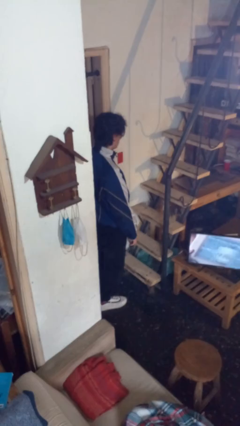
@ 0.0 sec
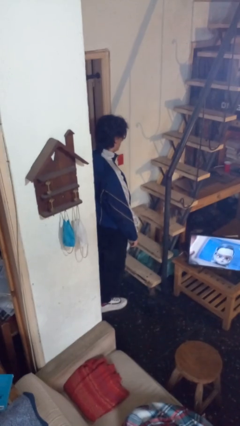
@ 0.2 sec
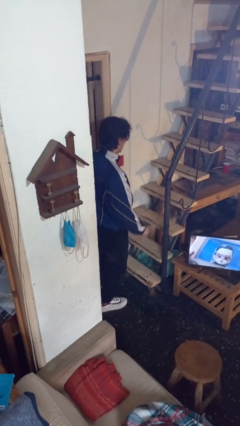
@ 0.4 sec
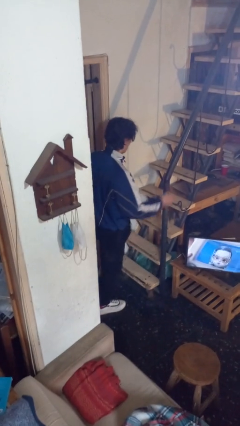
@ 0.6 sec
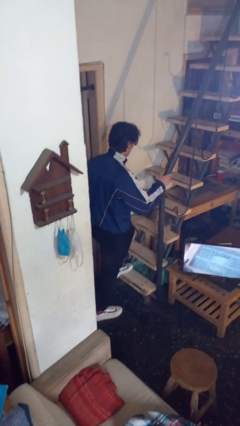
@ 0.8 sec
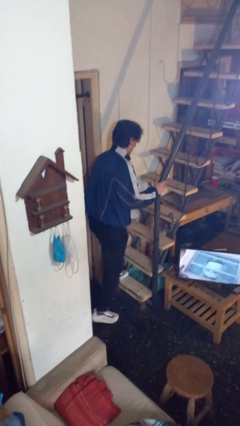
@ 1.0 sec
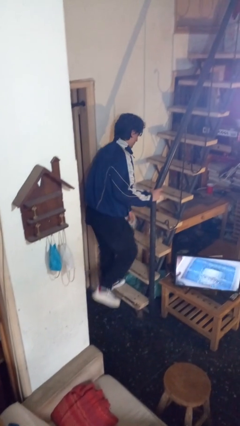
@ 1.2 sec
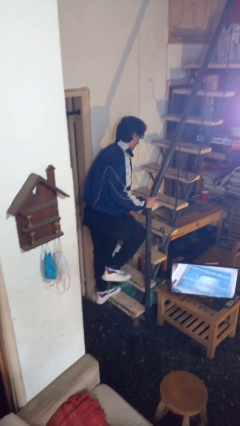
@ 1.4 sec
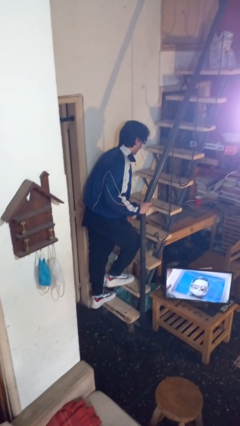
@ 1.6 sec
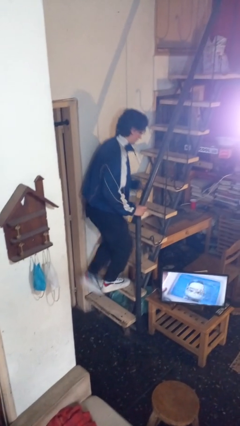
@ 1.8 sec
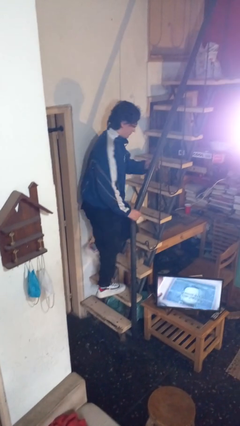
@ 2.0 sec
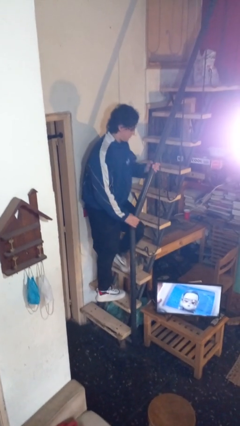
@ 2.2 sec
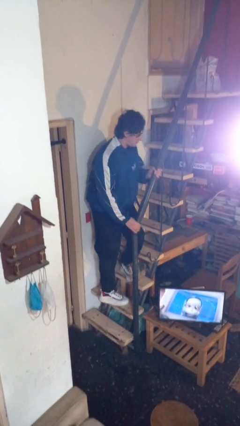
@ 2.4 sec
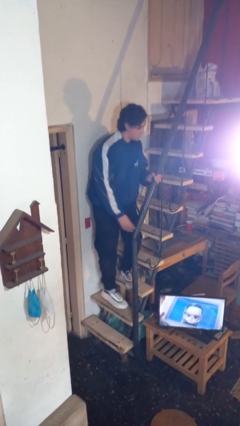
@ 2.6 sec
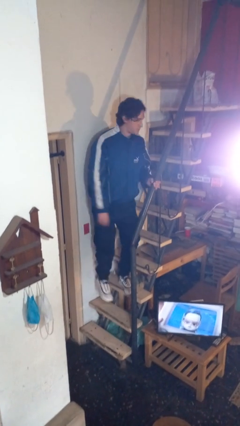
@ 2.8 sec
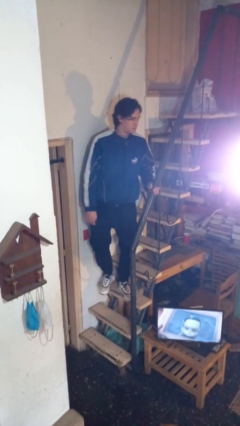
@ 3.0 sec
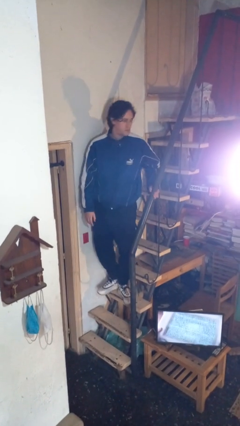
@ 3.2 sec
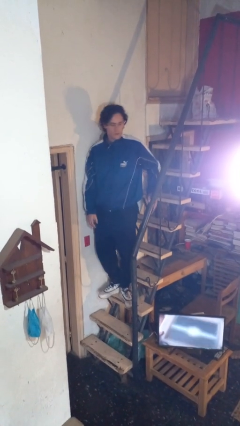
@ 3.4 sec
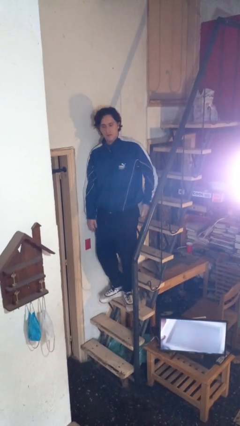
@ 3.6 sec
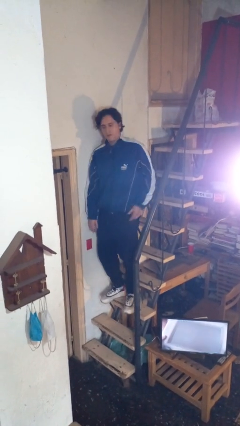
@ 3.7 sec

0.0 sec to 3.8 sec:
person climbs up stairs

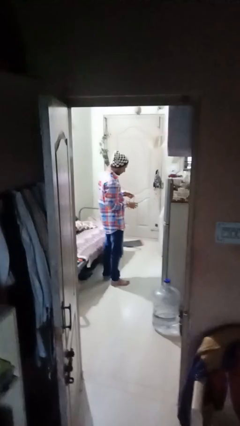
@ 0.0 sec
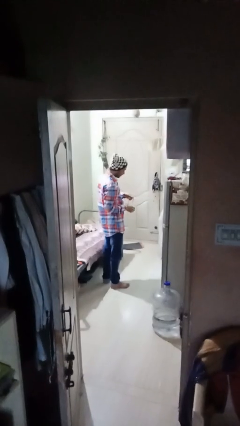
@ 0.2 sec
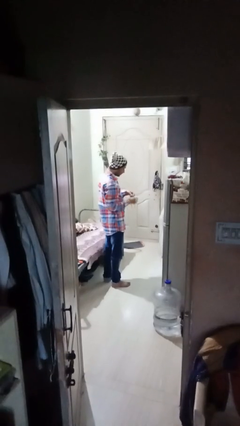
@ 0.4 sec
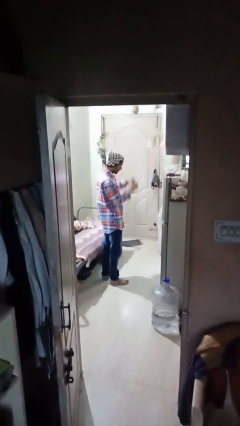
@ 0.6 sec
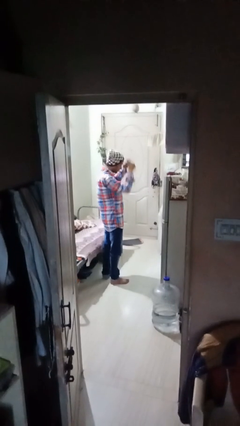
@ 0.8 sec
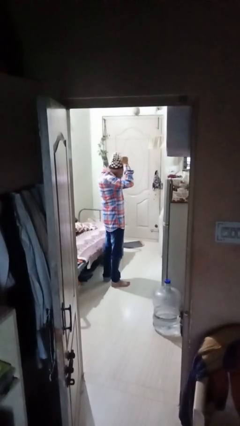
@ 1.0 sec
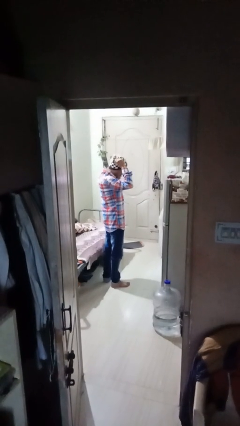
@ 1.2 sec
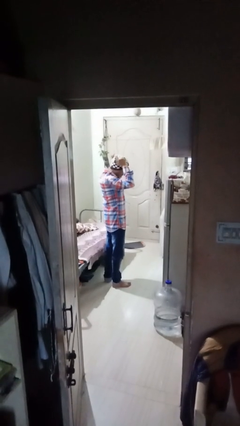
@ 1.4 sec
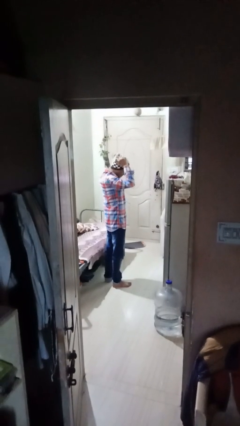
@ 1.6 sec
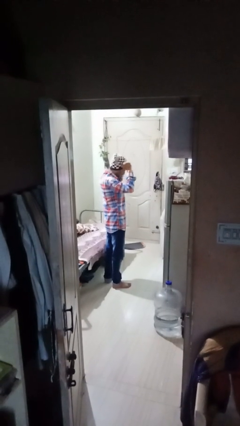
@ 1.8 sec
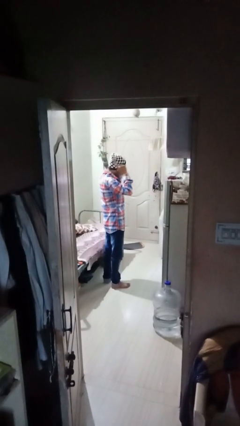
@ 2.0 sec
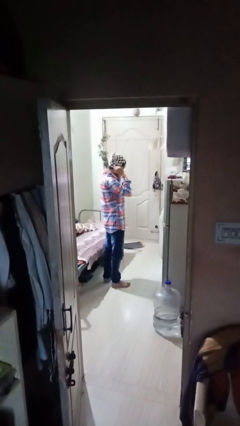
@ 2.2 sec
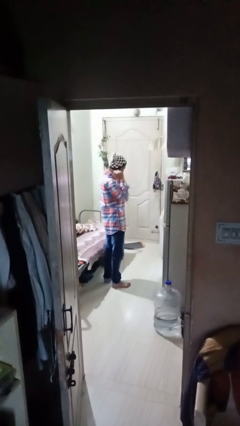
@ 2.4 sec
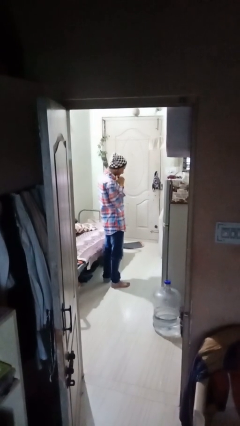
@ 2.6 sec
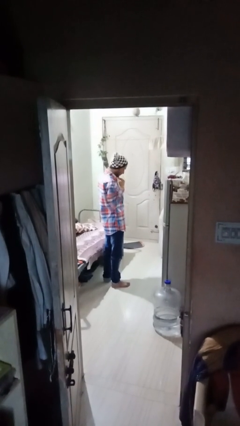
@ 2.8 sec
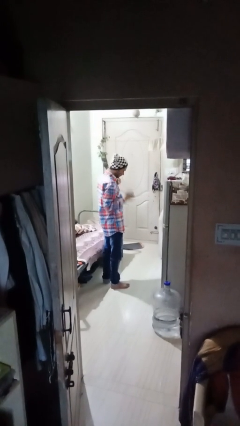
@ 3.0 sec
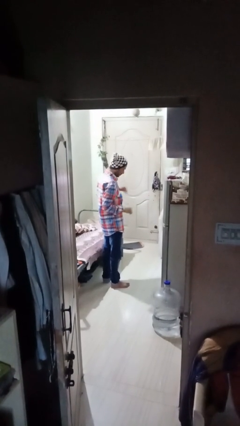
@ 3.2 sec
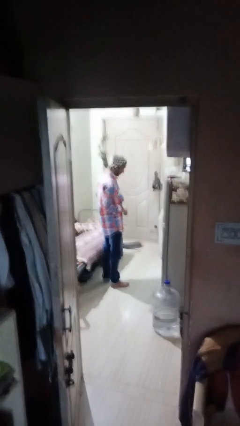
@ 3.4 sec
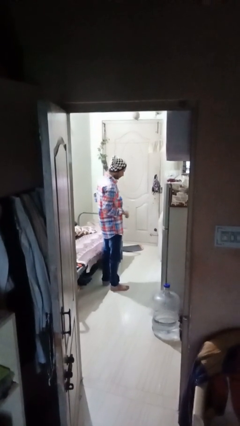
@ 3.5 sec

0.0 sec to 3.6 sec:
person puts on necklace

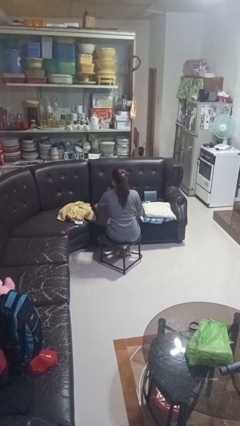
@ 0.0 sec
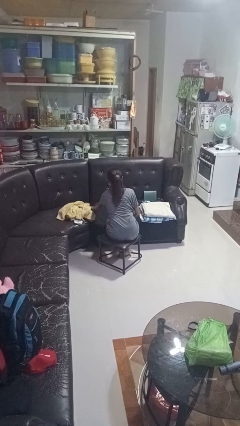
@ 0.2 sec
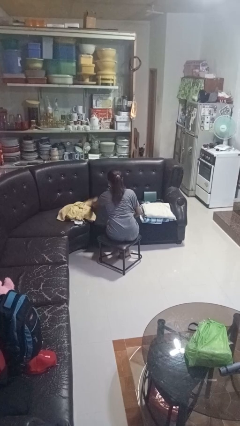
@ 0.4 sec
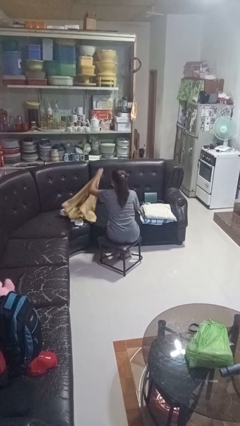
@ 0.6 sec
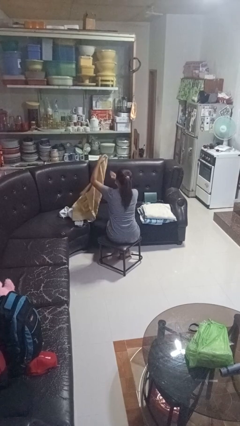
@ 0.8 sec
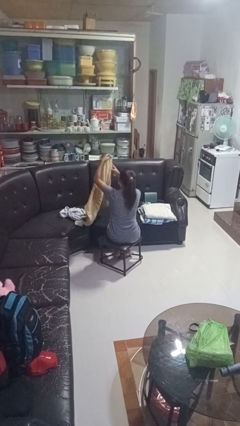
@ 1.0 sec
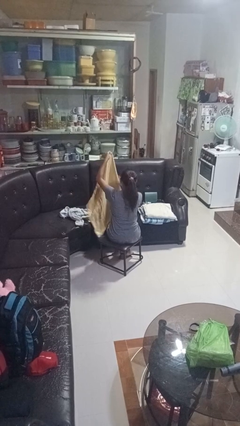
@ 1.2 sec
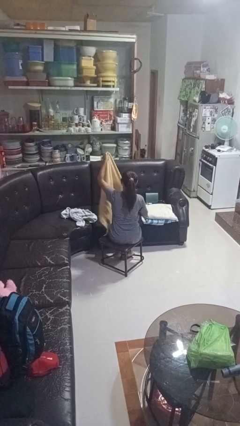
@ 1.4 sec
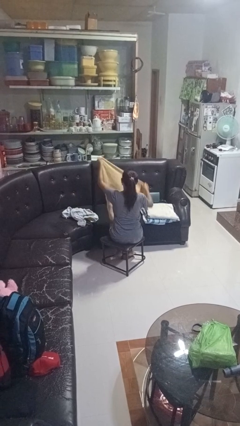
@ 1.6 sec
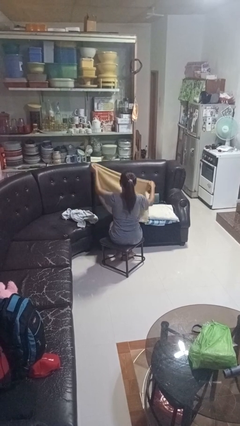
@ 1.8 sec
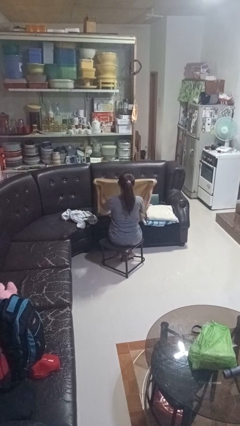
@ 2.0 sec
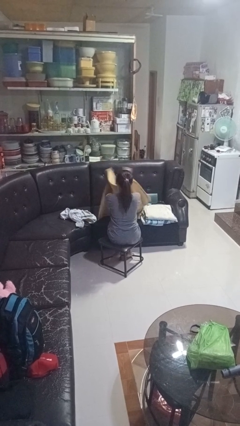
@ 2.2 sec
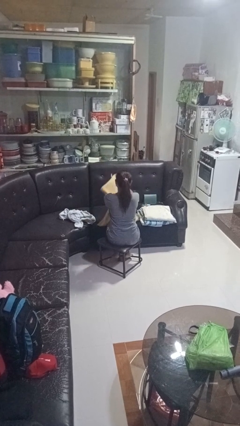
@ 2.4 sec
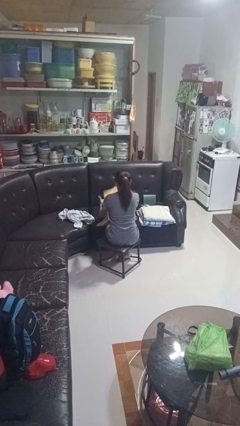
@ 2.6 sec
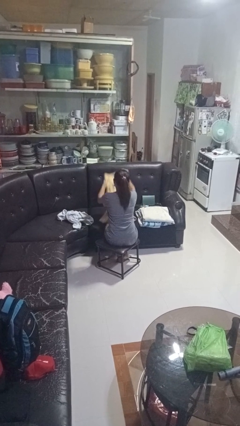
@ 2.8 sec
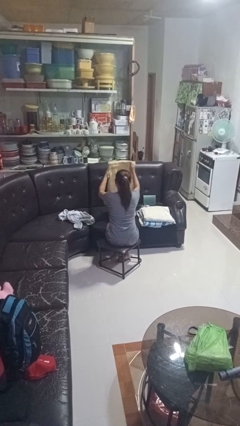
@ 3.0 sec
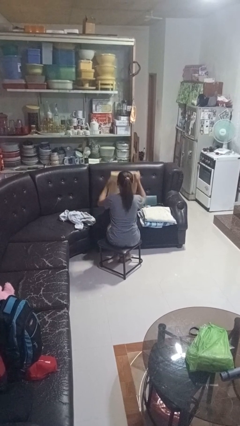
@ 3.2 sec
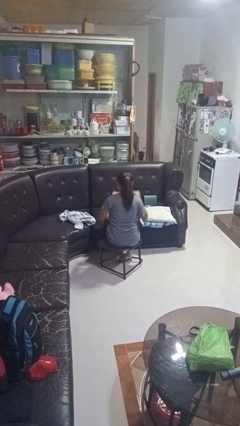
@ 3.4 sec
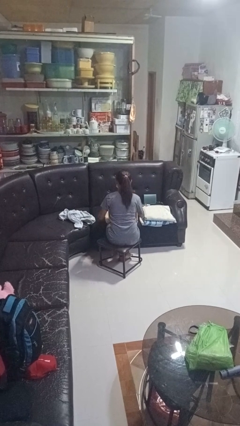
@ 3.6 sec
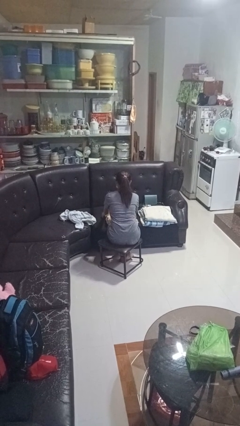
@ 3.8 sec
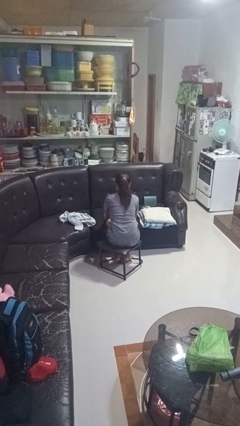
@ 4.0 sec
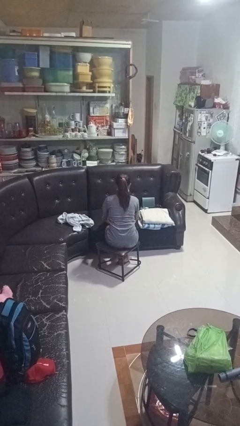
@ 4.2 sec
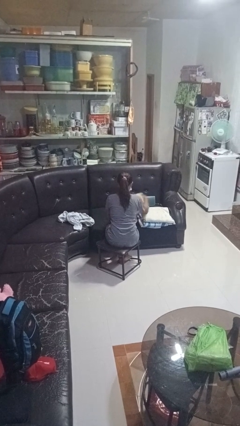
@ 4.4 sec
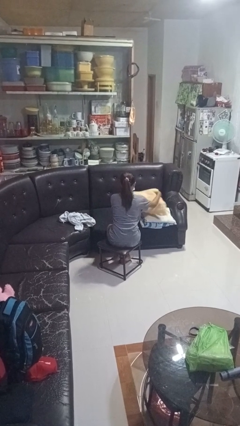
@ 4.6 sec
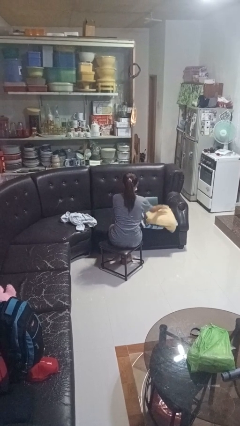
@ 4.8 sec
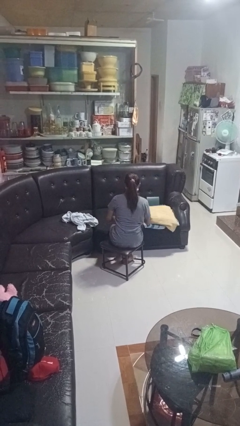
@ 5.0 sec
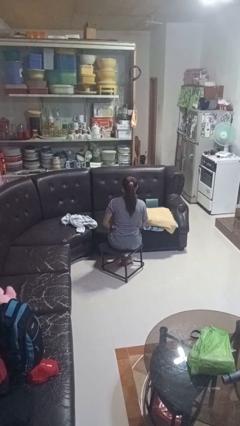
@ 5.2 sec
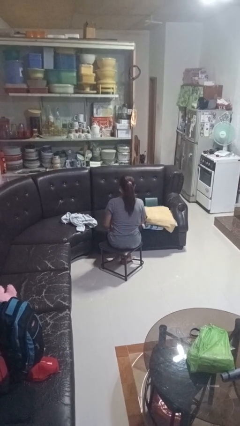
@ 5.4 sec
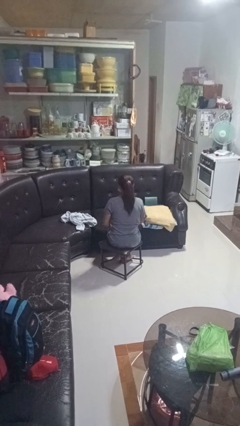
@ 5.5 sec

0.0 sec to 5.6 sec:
person folds towel

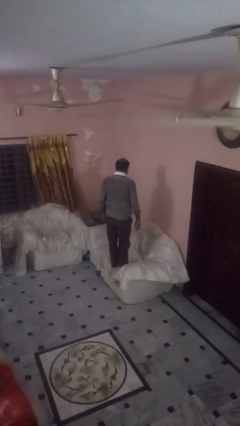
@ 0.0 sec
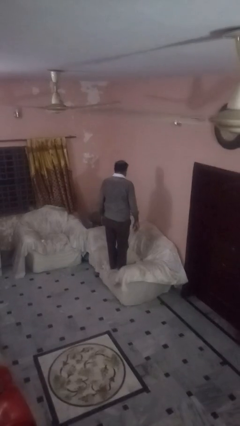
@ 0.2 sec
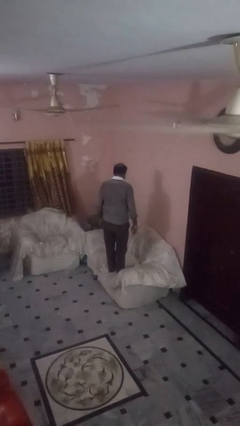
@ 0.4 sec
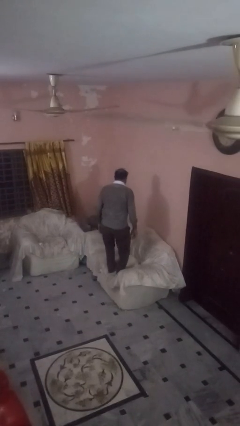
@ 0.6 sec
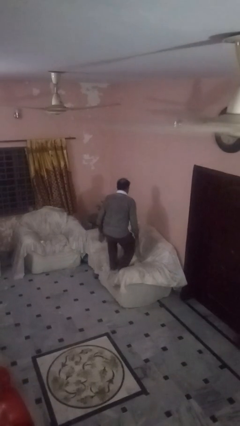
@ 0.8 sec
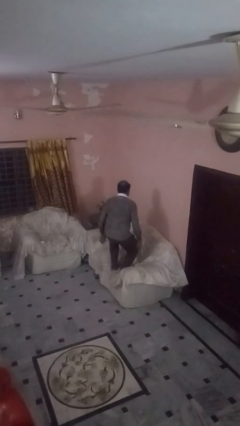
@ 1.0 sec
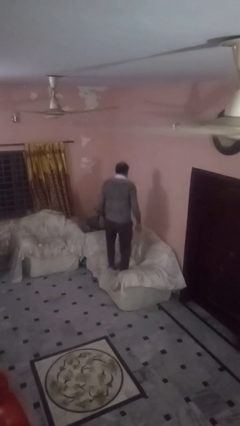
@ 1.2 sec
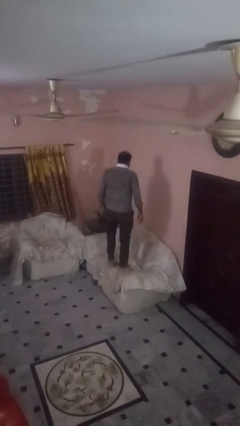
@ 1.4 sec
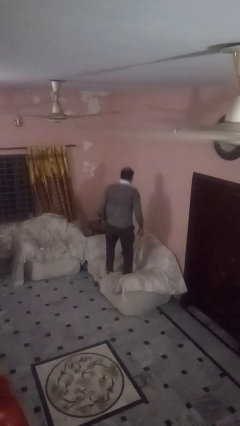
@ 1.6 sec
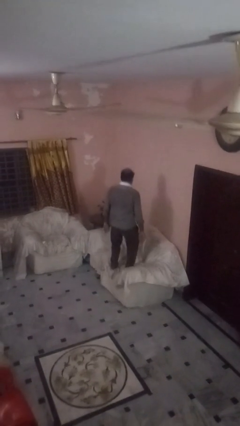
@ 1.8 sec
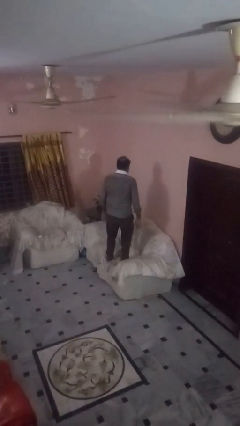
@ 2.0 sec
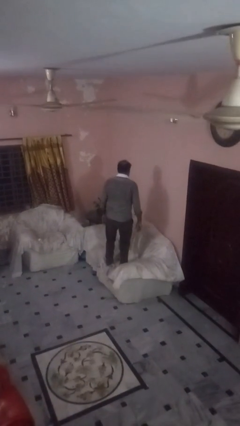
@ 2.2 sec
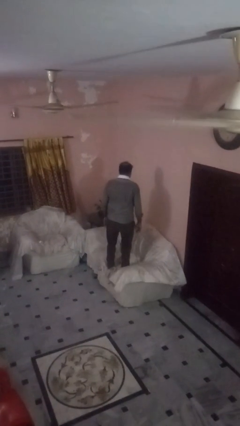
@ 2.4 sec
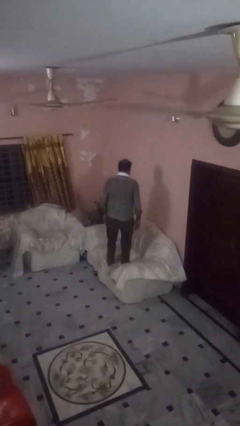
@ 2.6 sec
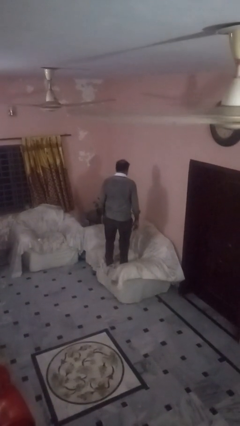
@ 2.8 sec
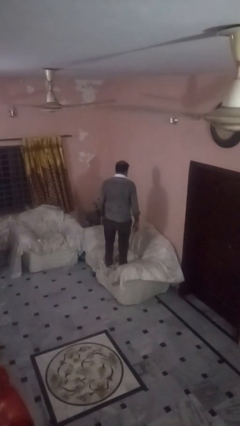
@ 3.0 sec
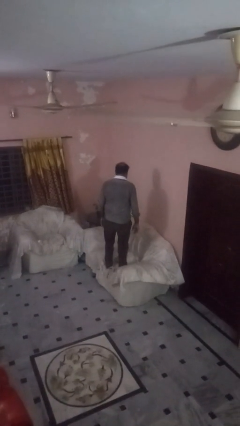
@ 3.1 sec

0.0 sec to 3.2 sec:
person jumps on couch

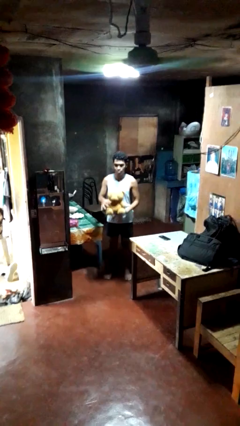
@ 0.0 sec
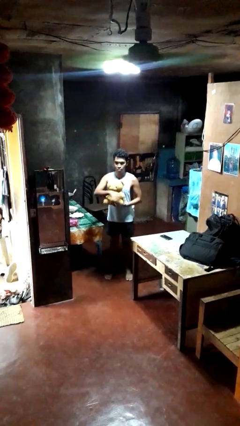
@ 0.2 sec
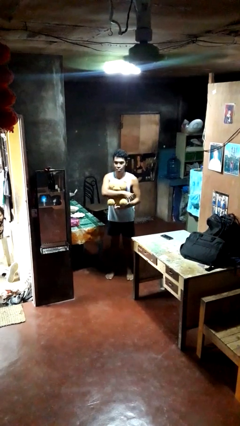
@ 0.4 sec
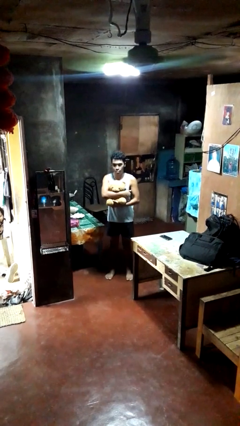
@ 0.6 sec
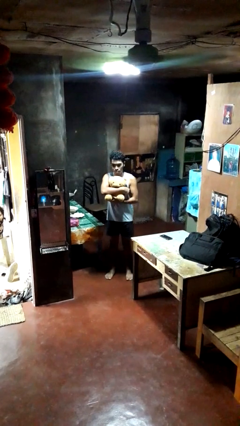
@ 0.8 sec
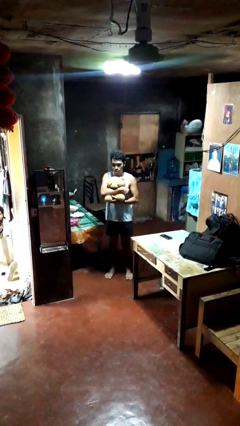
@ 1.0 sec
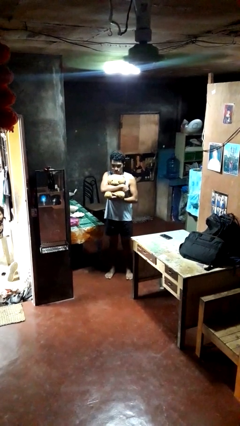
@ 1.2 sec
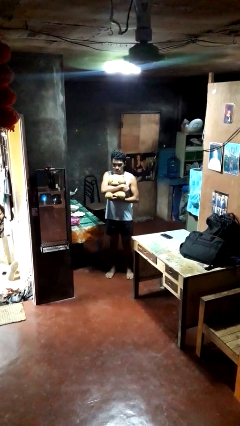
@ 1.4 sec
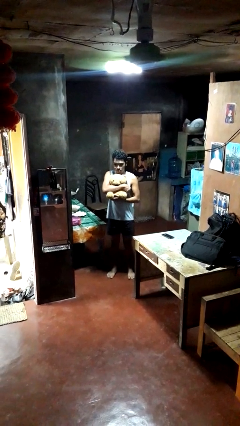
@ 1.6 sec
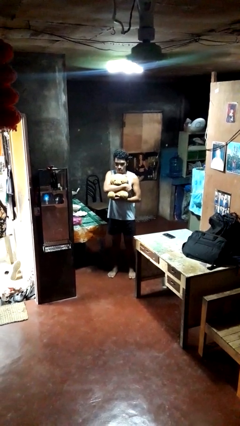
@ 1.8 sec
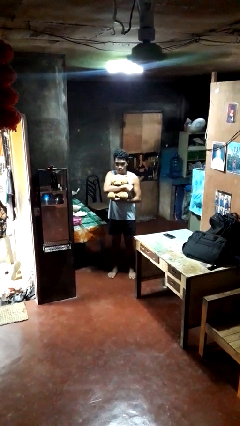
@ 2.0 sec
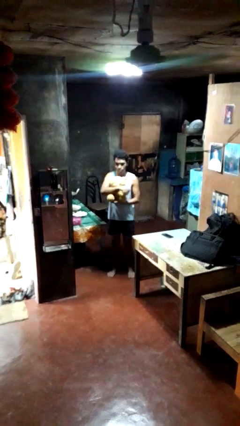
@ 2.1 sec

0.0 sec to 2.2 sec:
person hugs stuffed animal
